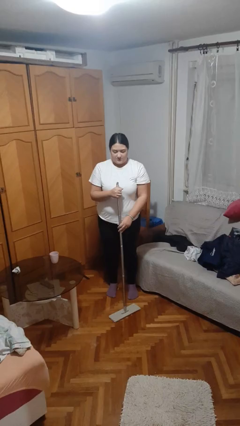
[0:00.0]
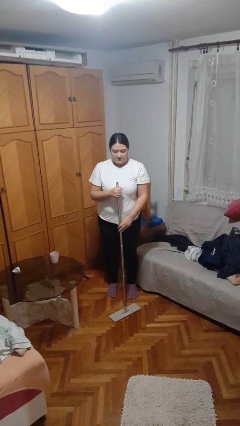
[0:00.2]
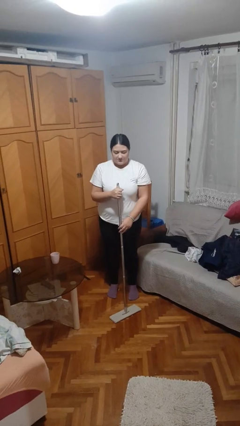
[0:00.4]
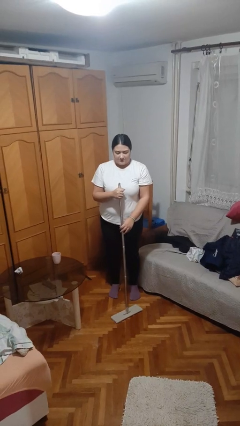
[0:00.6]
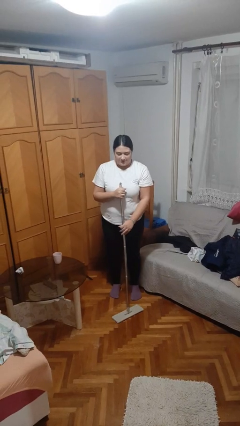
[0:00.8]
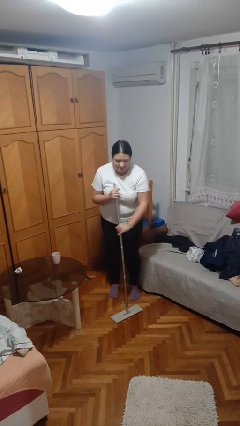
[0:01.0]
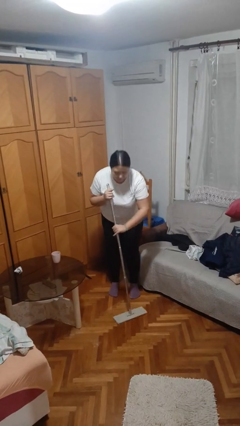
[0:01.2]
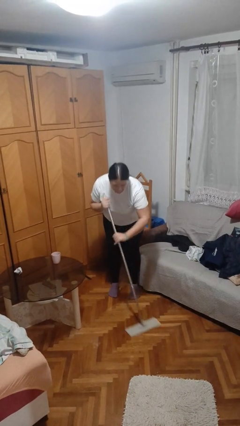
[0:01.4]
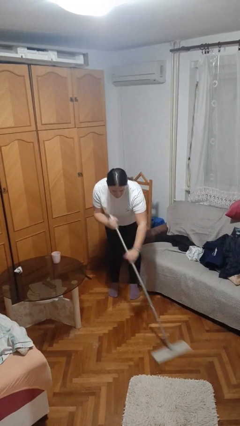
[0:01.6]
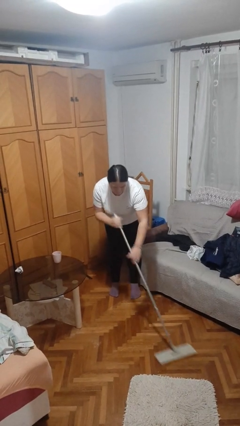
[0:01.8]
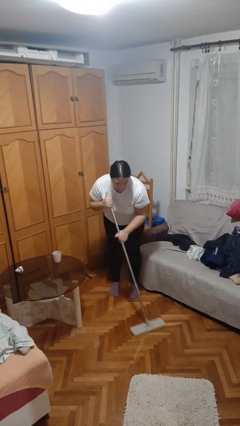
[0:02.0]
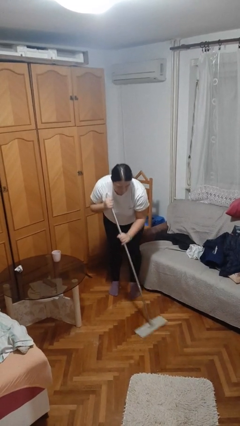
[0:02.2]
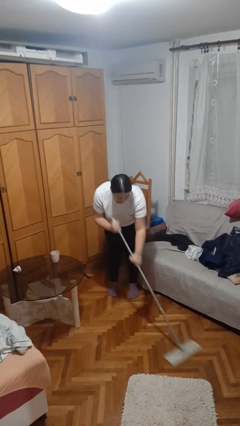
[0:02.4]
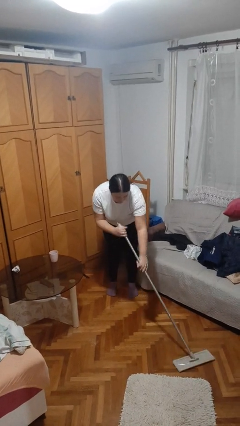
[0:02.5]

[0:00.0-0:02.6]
person mops

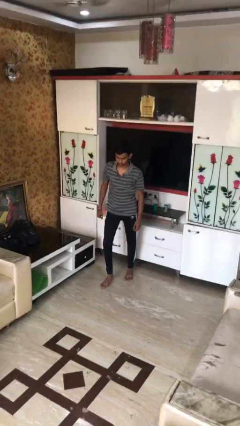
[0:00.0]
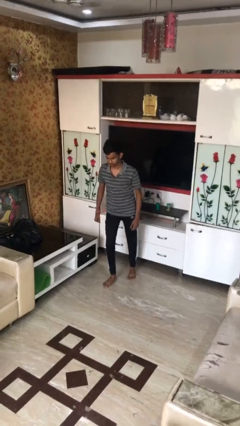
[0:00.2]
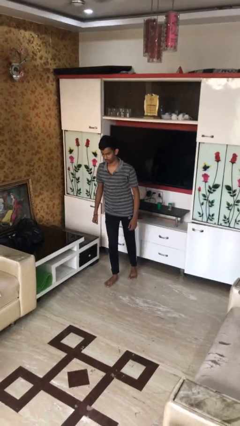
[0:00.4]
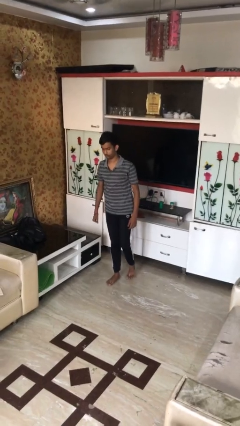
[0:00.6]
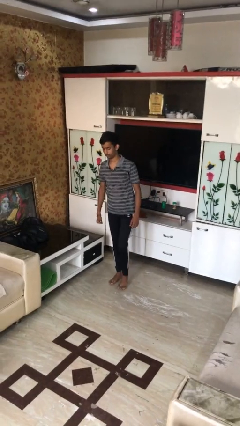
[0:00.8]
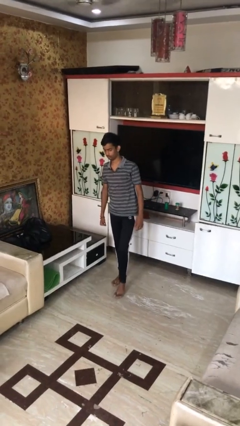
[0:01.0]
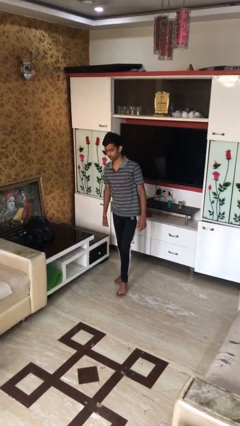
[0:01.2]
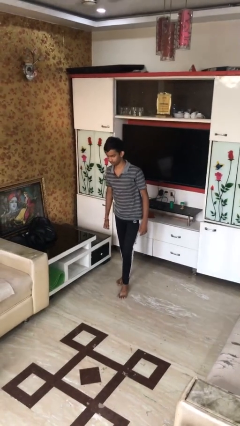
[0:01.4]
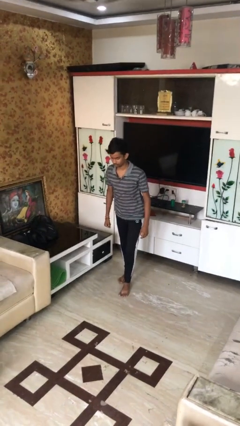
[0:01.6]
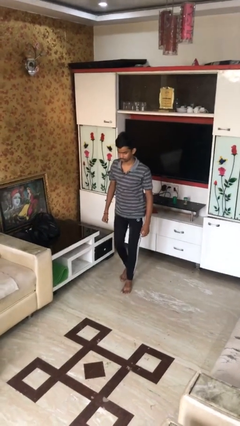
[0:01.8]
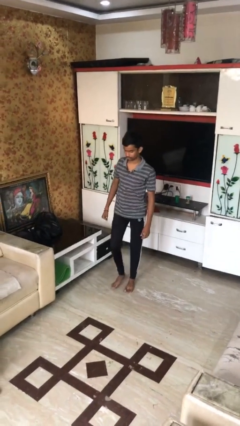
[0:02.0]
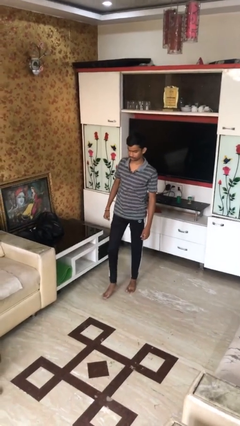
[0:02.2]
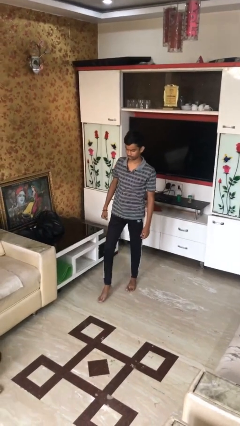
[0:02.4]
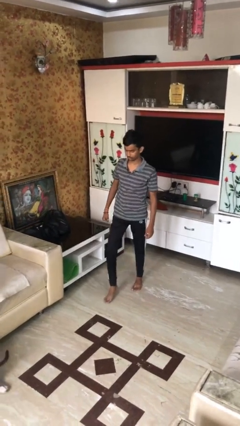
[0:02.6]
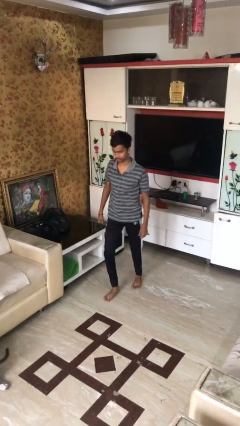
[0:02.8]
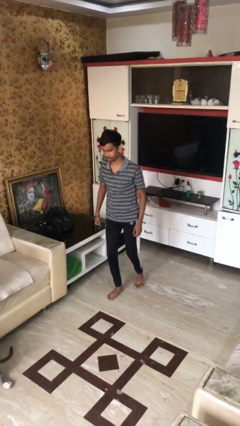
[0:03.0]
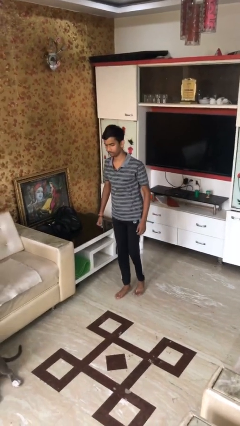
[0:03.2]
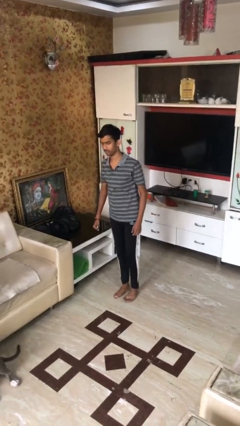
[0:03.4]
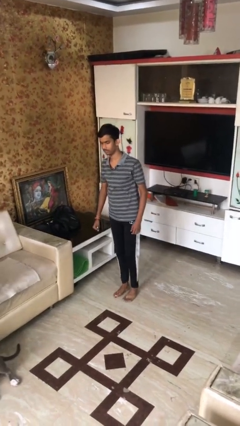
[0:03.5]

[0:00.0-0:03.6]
person walks tiptoe

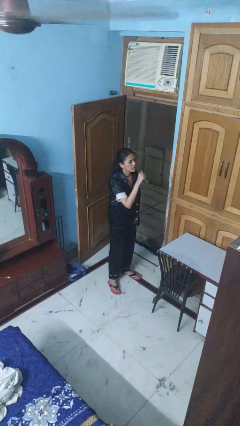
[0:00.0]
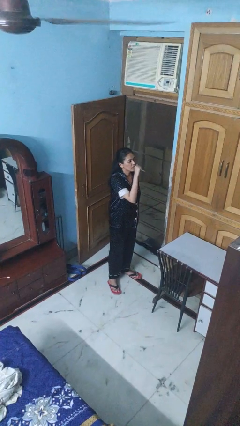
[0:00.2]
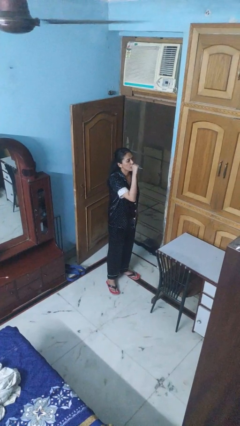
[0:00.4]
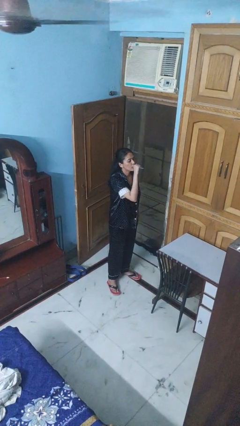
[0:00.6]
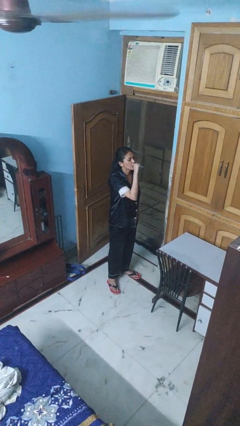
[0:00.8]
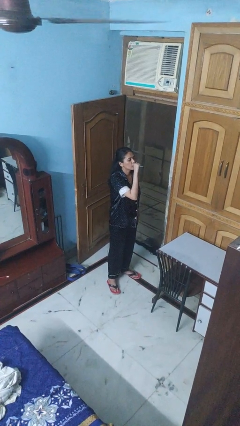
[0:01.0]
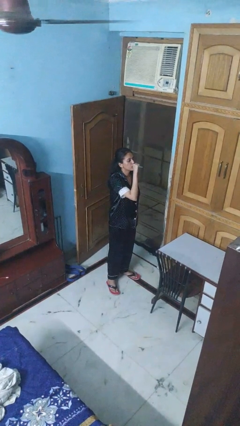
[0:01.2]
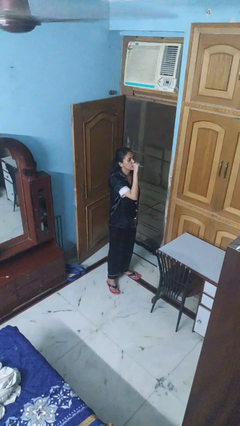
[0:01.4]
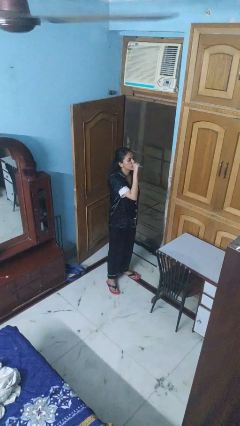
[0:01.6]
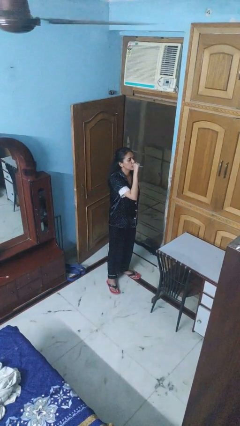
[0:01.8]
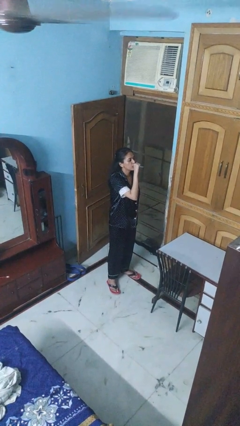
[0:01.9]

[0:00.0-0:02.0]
person vapes

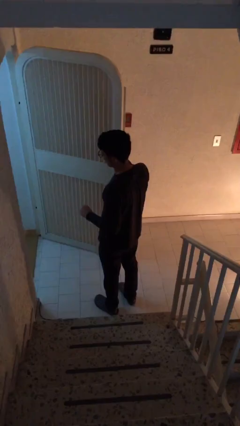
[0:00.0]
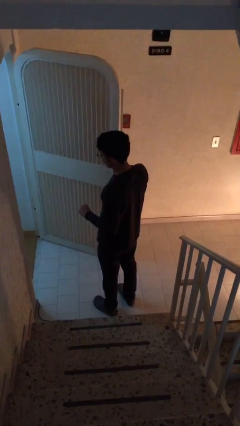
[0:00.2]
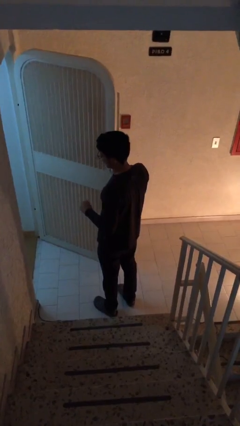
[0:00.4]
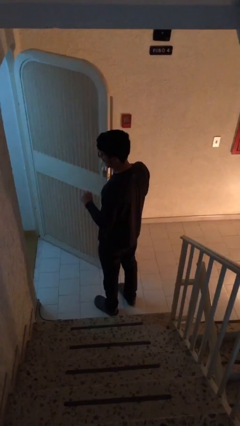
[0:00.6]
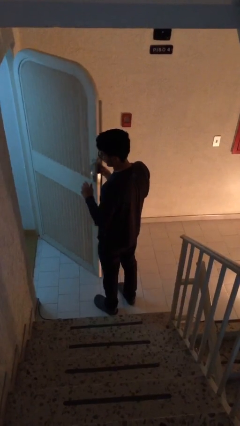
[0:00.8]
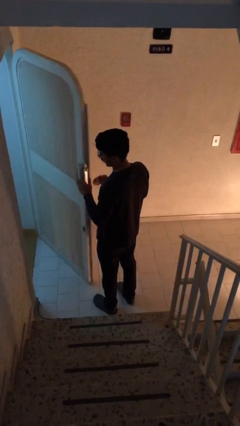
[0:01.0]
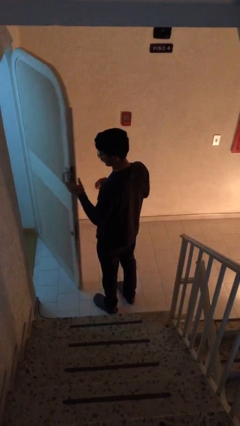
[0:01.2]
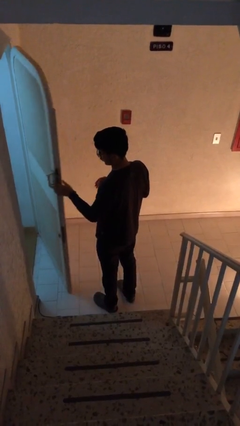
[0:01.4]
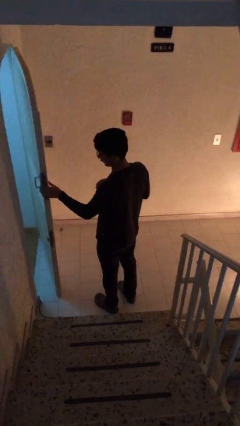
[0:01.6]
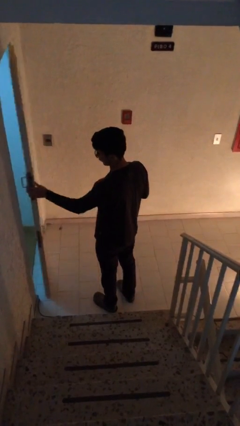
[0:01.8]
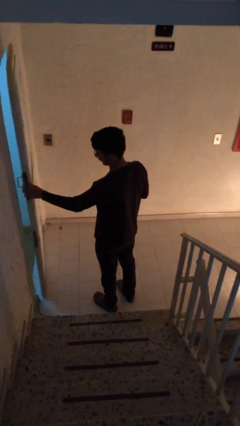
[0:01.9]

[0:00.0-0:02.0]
person closes facility door

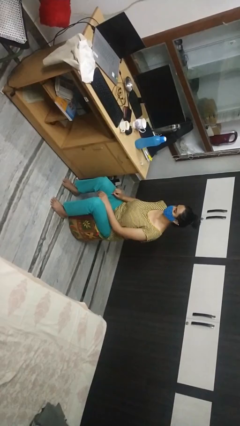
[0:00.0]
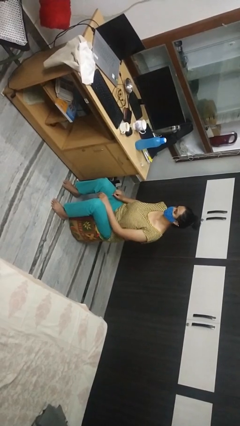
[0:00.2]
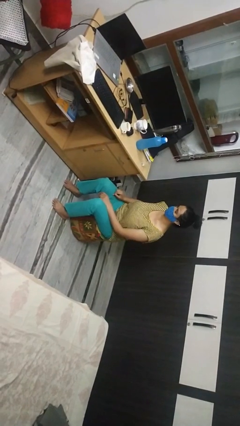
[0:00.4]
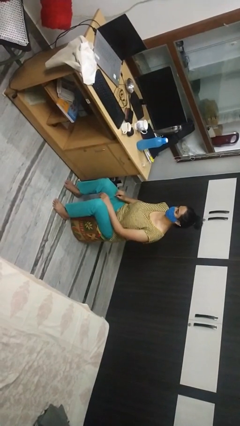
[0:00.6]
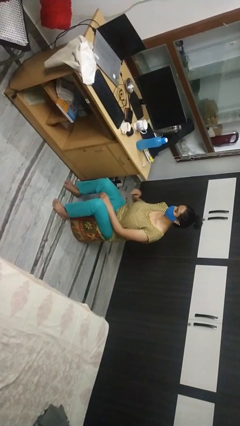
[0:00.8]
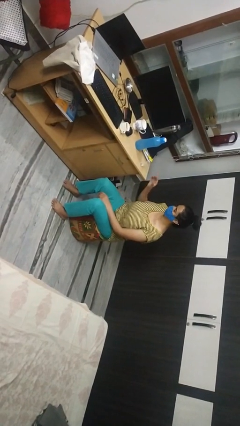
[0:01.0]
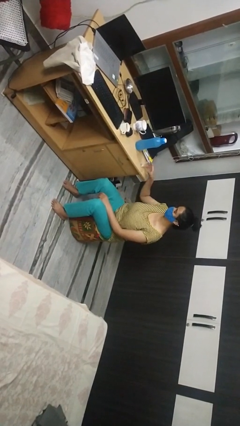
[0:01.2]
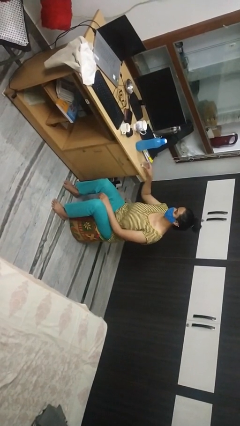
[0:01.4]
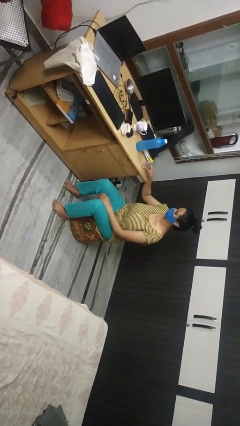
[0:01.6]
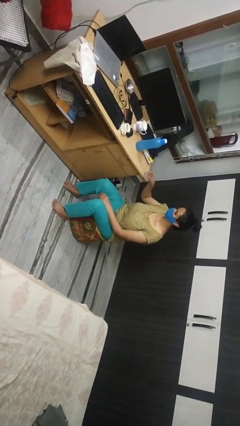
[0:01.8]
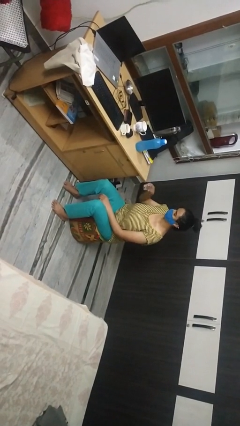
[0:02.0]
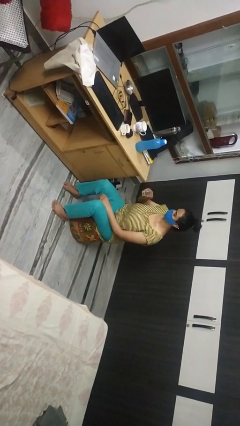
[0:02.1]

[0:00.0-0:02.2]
person picks up object from table

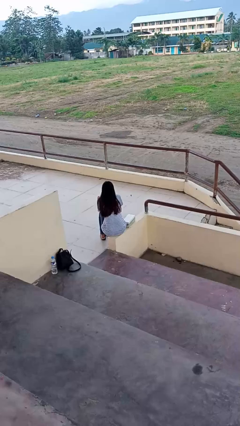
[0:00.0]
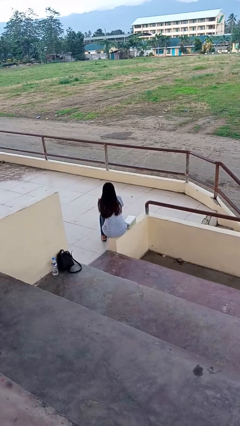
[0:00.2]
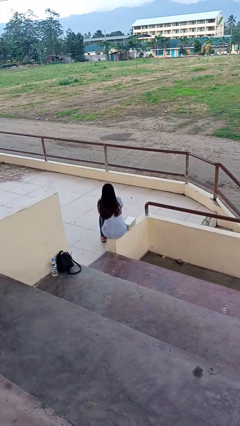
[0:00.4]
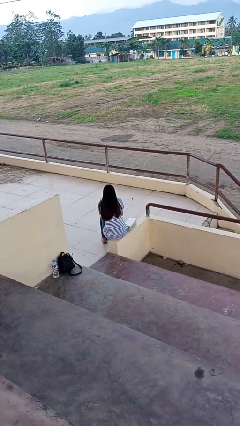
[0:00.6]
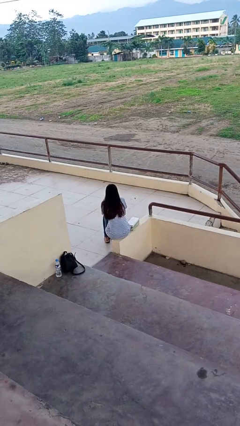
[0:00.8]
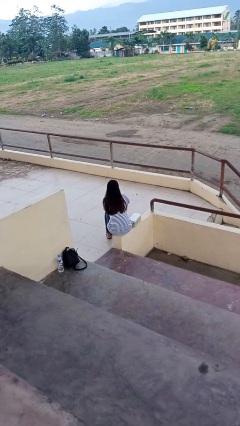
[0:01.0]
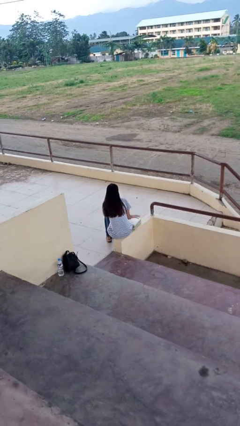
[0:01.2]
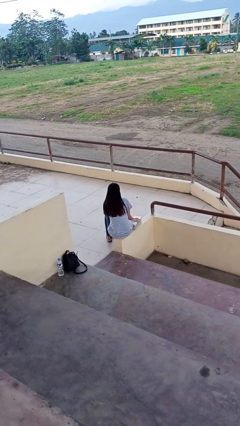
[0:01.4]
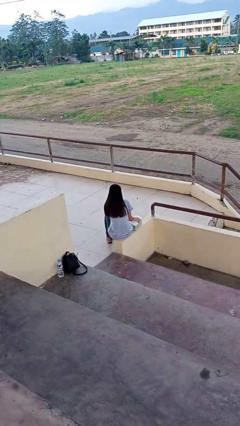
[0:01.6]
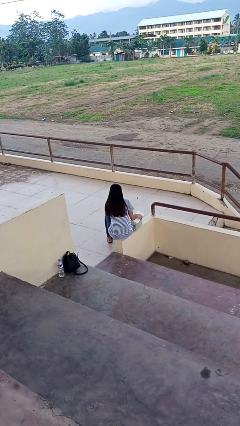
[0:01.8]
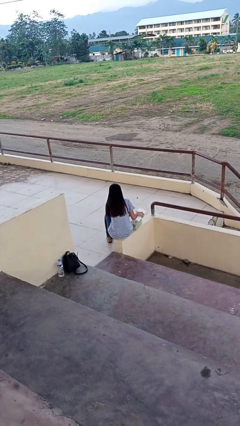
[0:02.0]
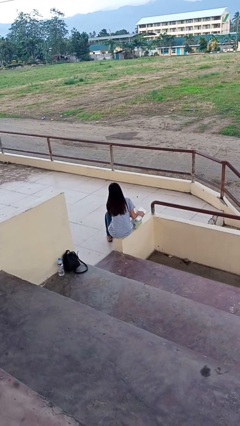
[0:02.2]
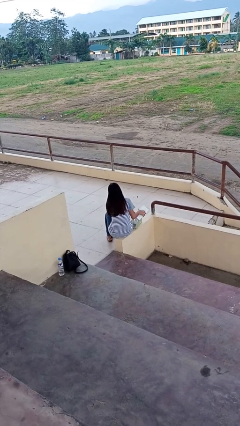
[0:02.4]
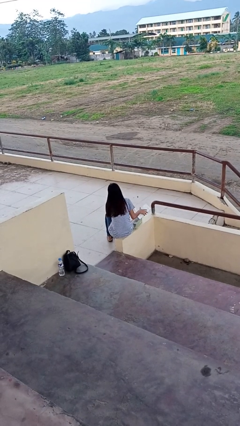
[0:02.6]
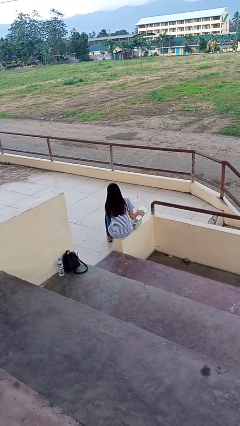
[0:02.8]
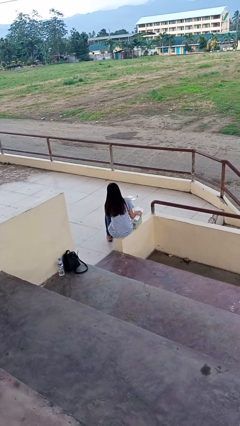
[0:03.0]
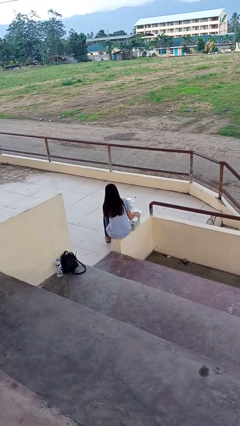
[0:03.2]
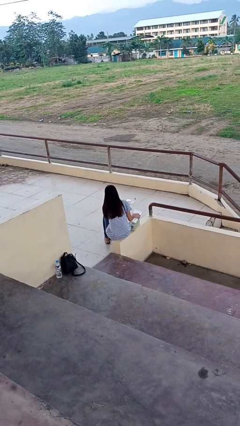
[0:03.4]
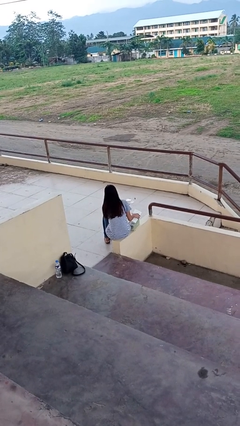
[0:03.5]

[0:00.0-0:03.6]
person takes object from box

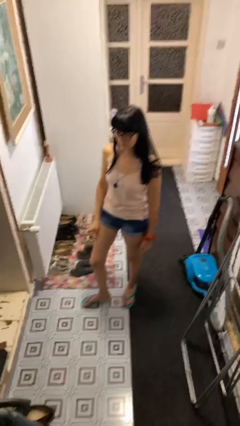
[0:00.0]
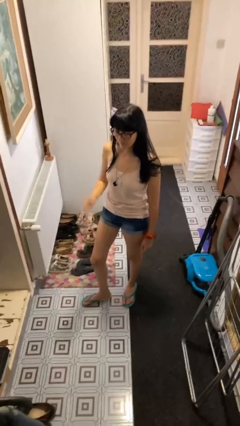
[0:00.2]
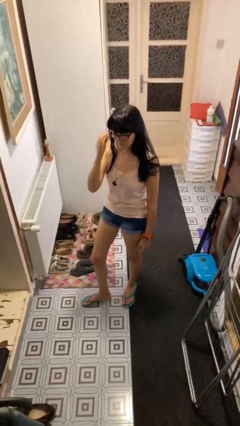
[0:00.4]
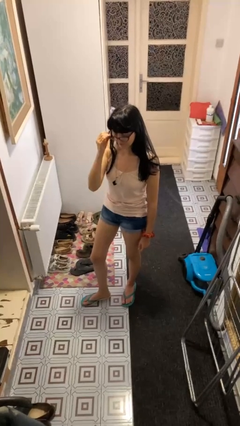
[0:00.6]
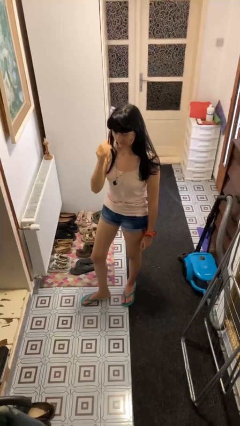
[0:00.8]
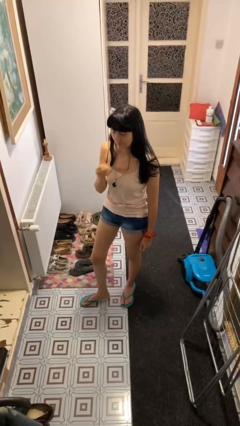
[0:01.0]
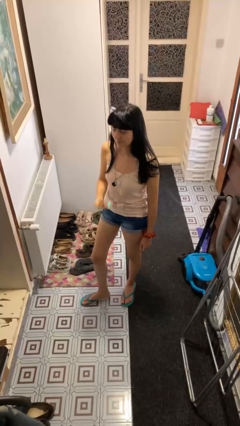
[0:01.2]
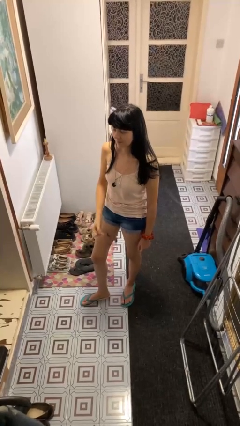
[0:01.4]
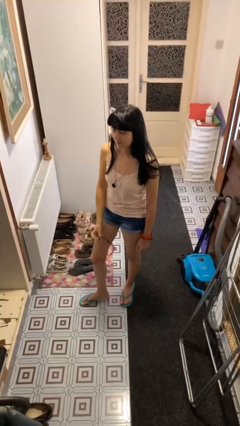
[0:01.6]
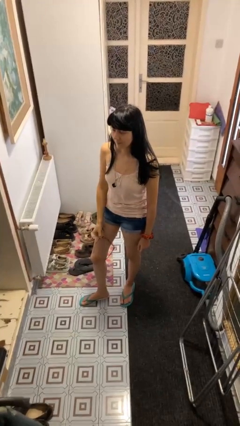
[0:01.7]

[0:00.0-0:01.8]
person takes off glasses
